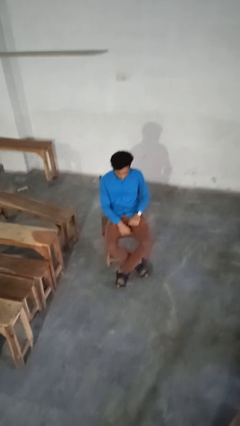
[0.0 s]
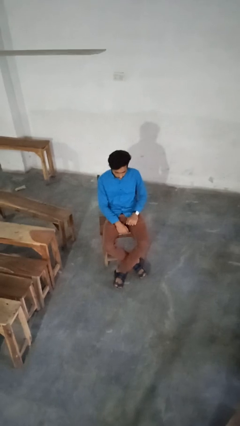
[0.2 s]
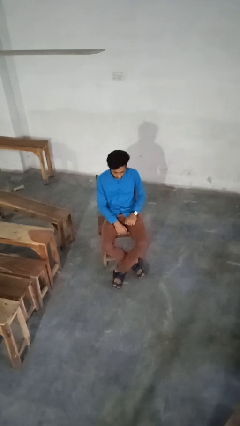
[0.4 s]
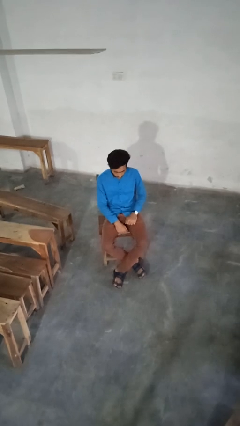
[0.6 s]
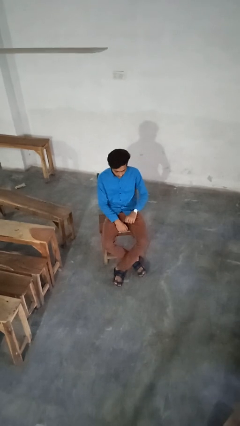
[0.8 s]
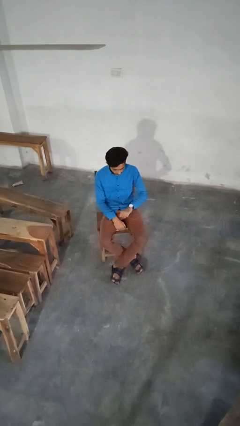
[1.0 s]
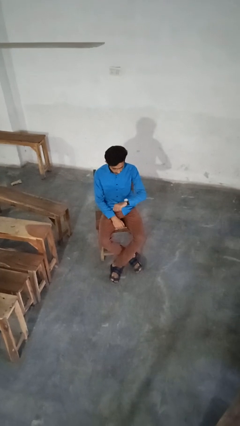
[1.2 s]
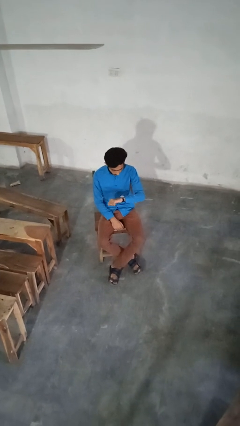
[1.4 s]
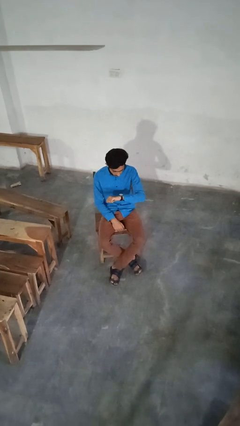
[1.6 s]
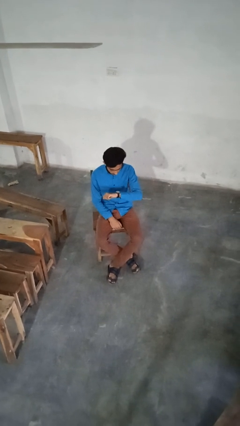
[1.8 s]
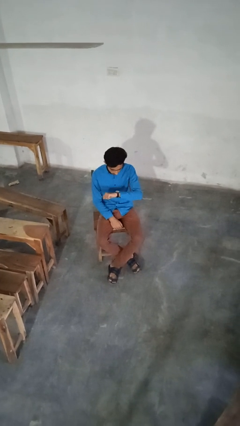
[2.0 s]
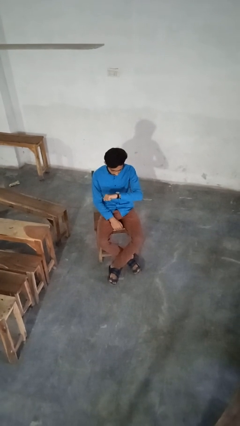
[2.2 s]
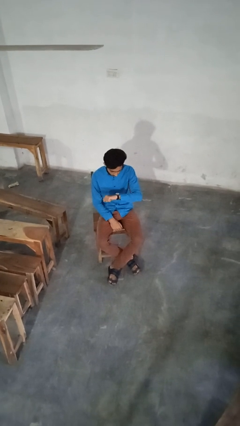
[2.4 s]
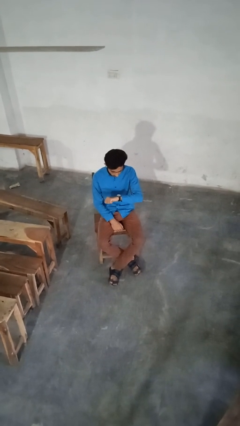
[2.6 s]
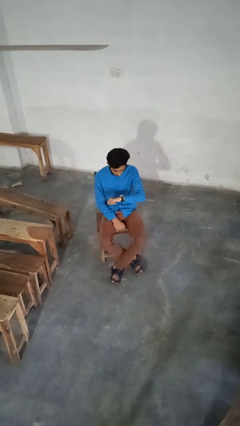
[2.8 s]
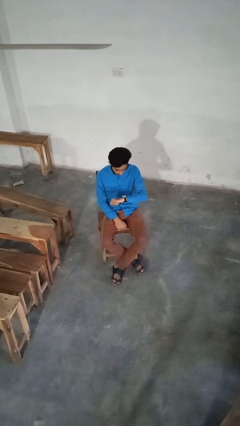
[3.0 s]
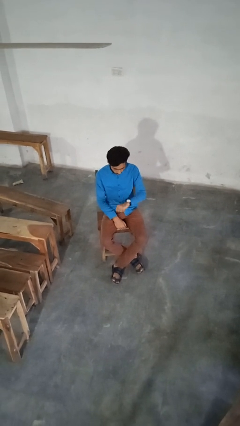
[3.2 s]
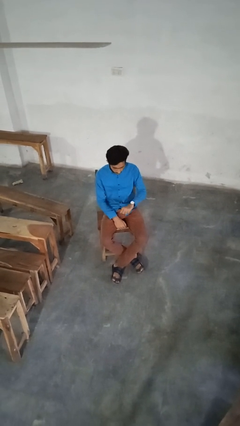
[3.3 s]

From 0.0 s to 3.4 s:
person looks at wristwatch

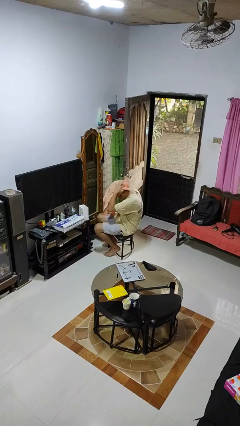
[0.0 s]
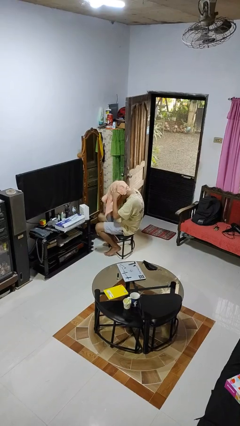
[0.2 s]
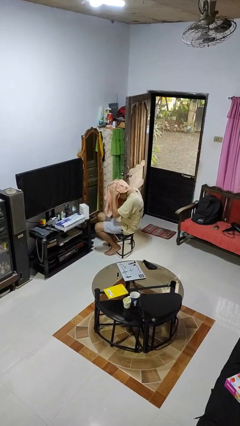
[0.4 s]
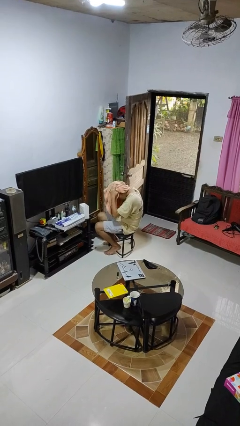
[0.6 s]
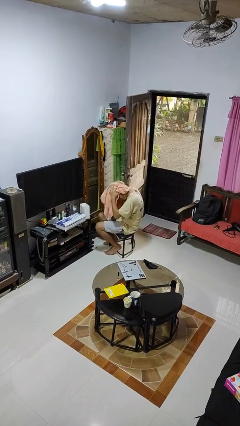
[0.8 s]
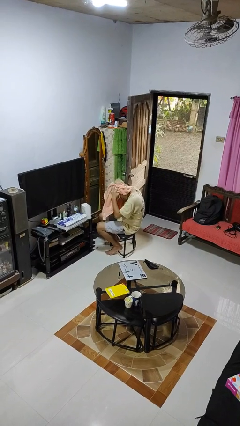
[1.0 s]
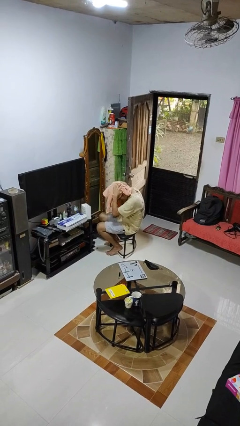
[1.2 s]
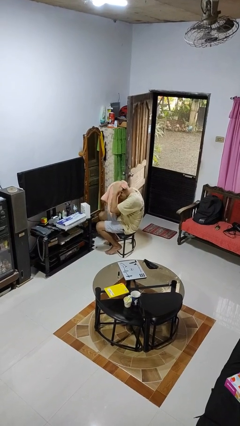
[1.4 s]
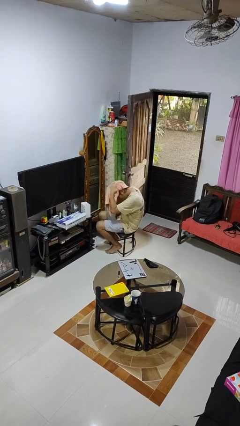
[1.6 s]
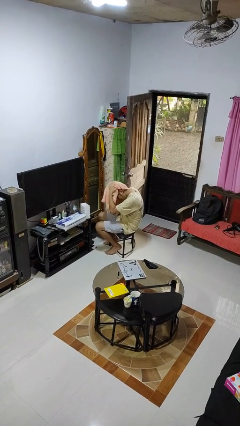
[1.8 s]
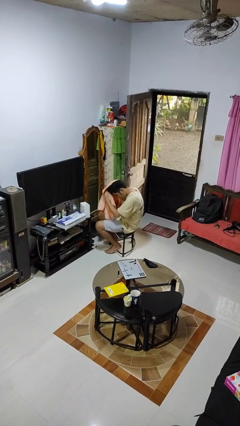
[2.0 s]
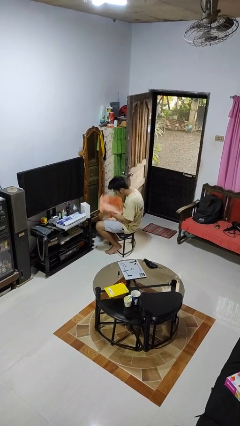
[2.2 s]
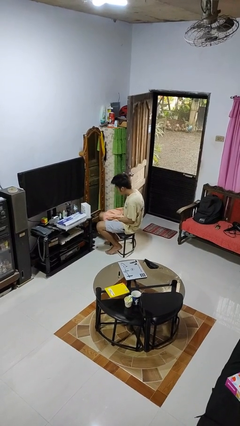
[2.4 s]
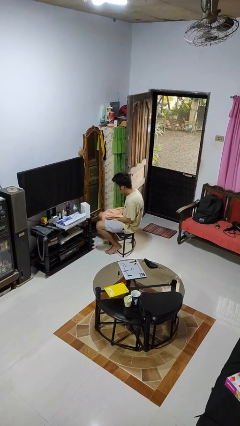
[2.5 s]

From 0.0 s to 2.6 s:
person dries hair with towel

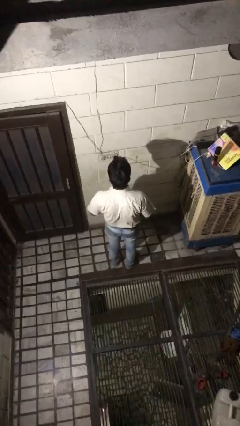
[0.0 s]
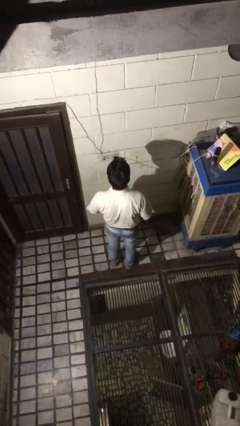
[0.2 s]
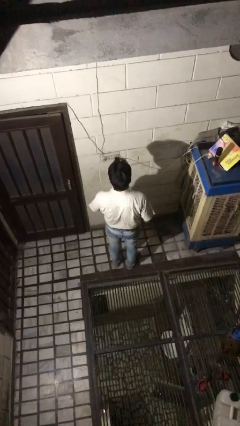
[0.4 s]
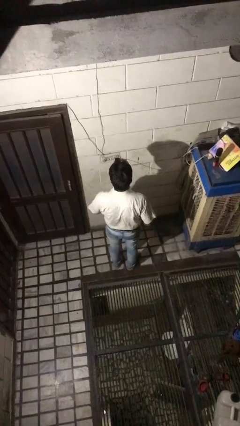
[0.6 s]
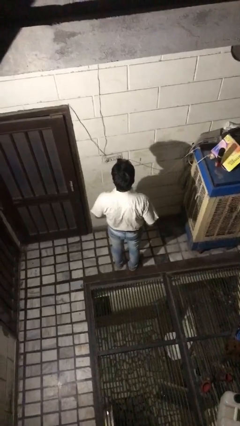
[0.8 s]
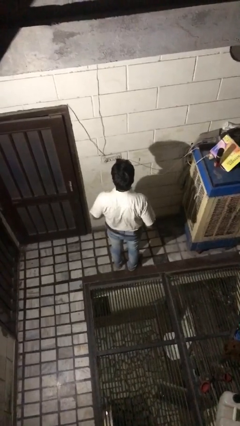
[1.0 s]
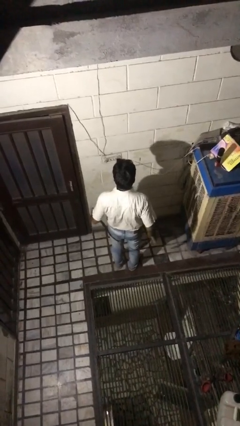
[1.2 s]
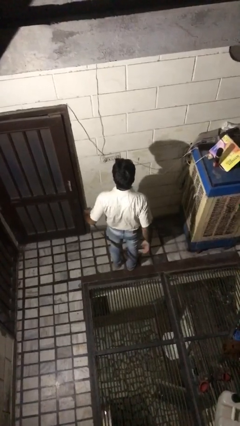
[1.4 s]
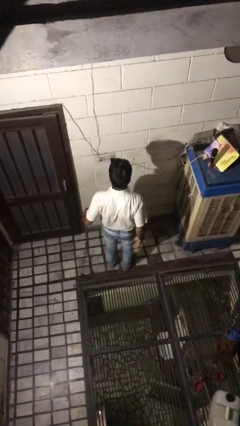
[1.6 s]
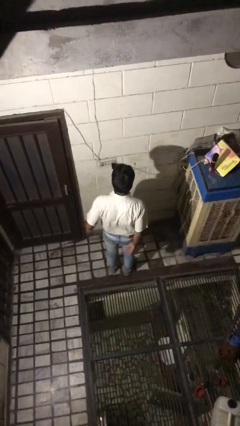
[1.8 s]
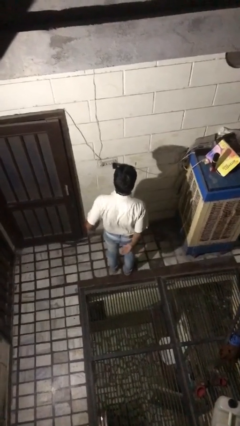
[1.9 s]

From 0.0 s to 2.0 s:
person takes off belt

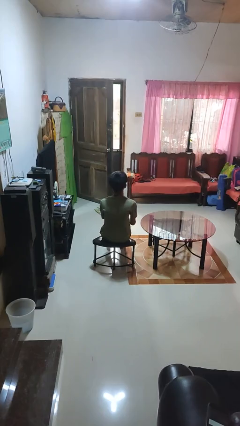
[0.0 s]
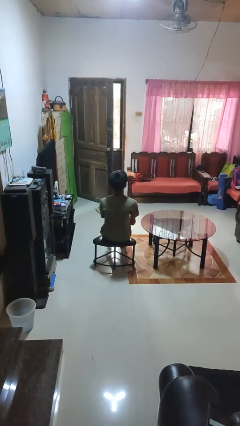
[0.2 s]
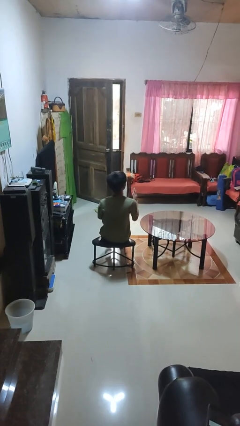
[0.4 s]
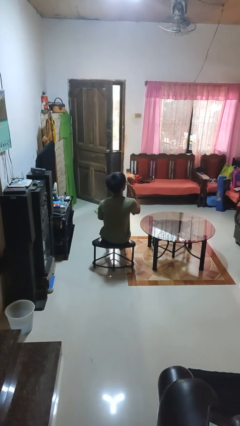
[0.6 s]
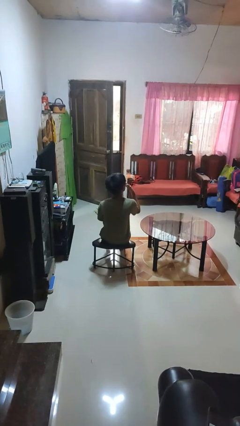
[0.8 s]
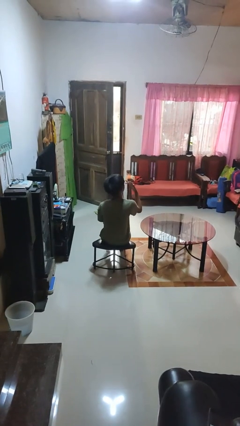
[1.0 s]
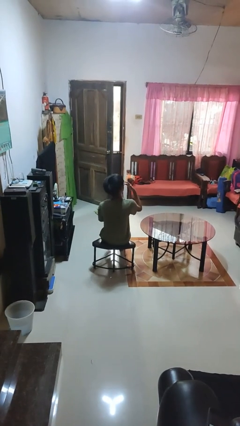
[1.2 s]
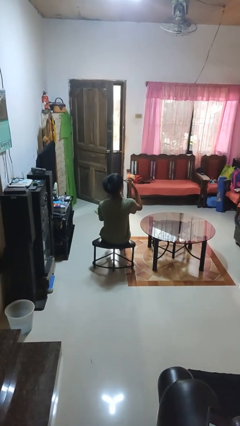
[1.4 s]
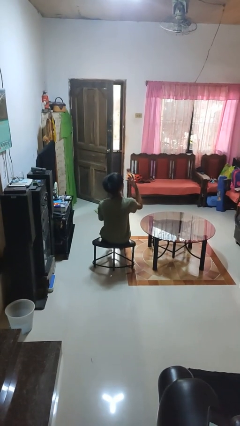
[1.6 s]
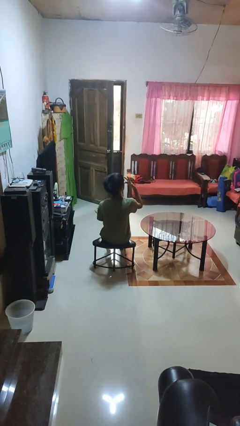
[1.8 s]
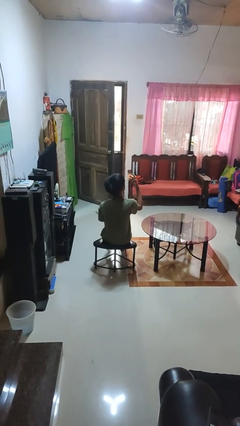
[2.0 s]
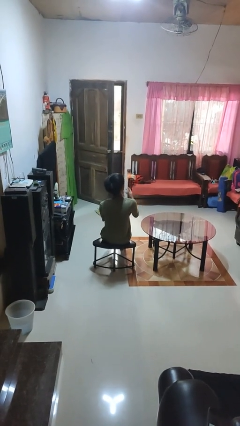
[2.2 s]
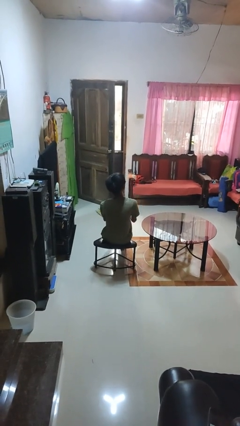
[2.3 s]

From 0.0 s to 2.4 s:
person licks fingers

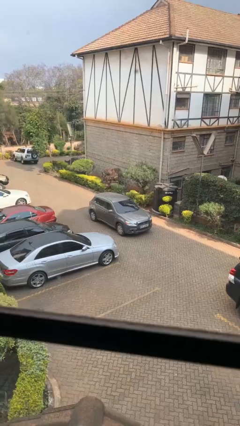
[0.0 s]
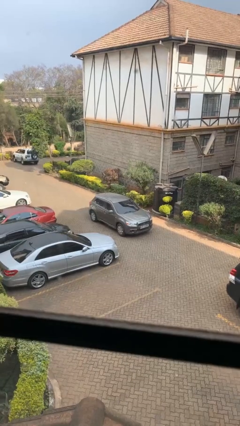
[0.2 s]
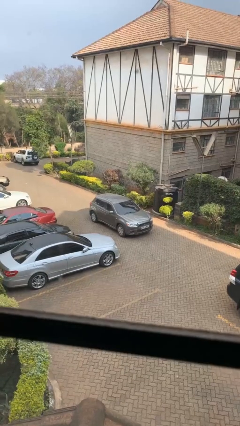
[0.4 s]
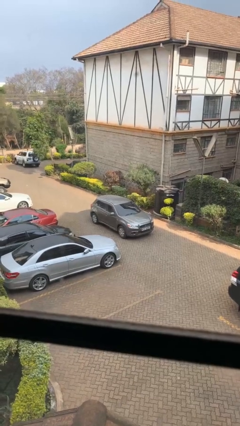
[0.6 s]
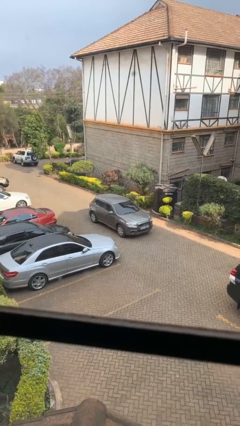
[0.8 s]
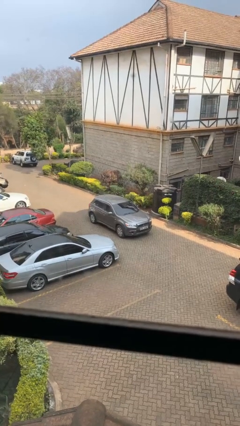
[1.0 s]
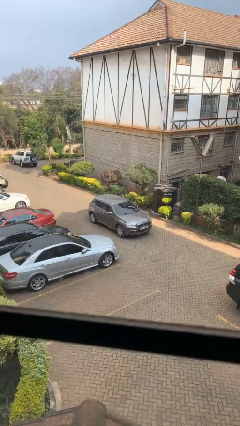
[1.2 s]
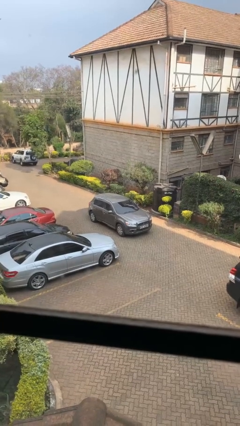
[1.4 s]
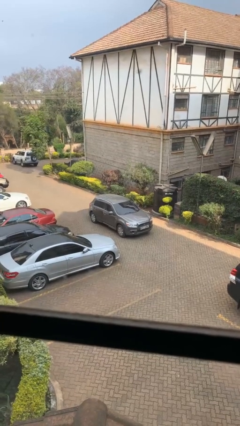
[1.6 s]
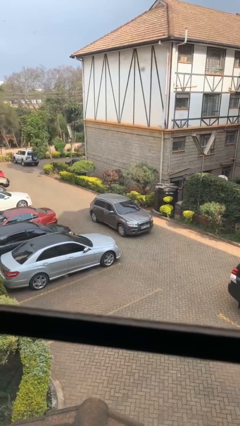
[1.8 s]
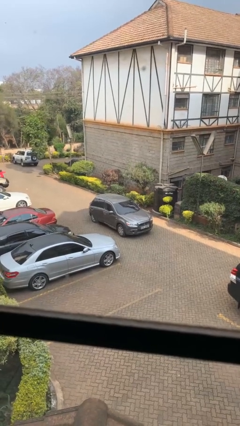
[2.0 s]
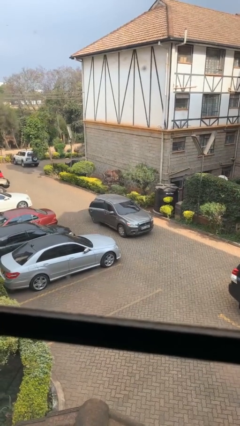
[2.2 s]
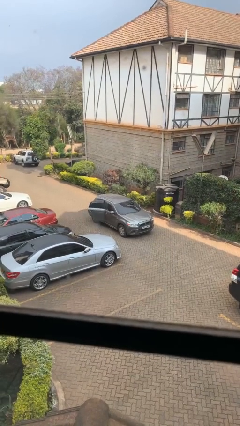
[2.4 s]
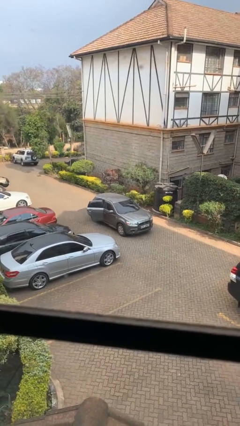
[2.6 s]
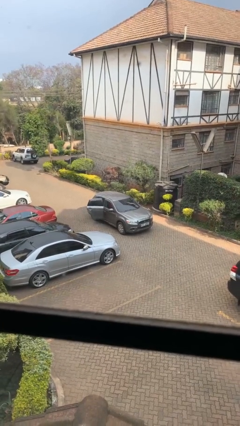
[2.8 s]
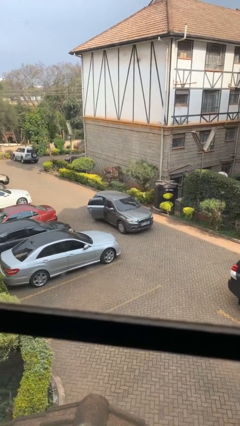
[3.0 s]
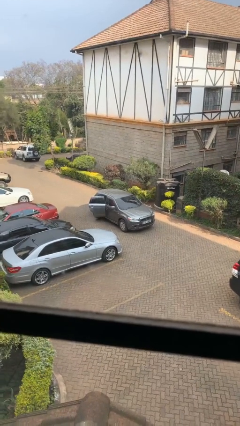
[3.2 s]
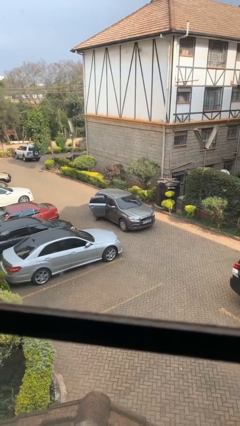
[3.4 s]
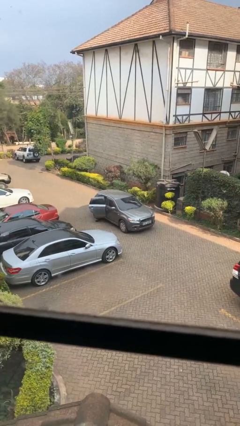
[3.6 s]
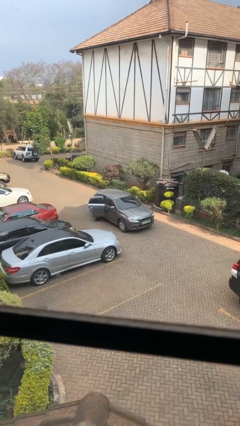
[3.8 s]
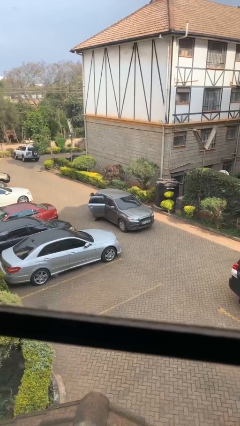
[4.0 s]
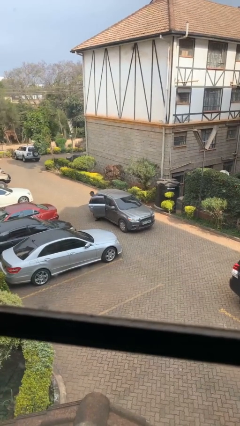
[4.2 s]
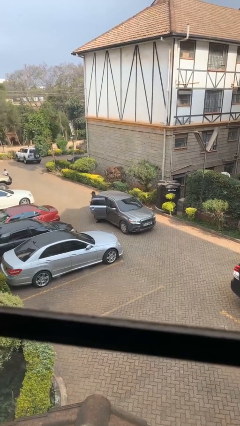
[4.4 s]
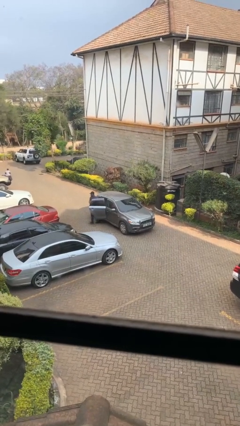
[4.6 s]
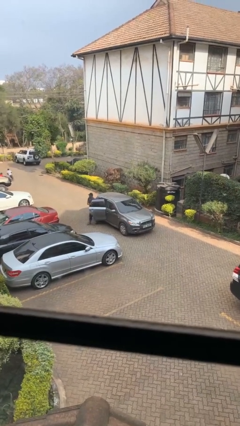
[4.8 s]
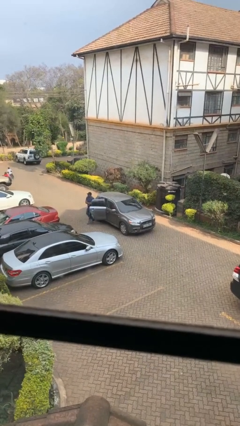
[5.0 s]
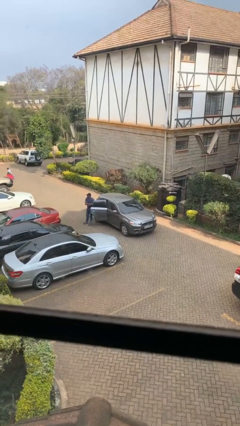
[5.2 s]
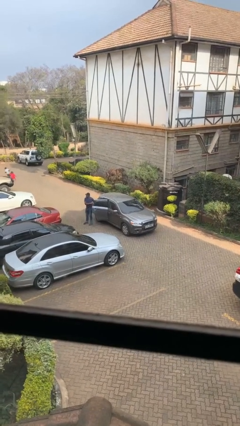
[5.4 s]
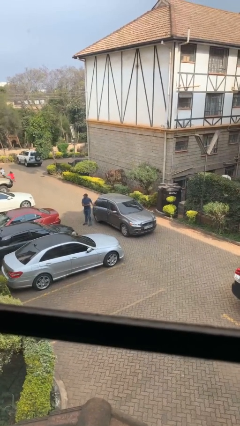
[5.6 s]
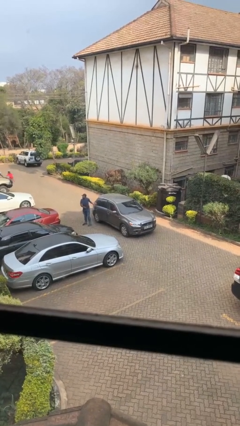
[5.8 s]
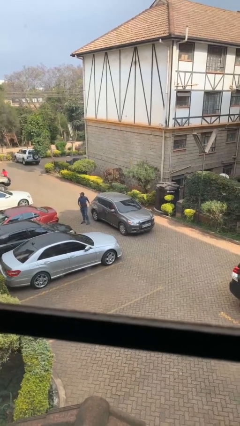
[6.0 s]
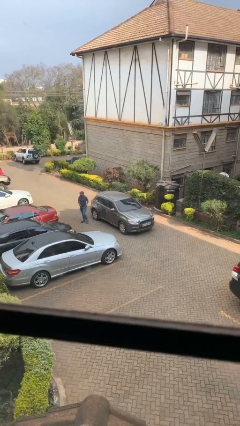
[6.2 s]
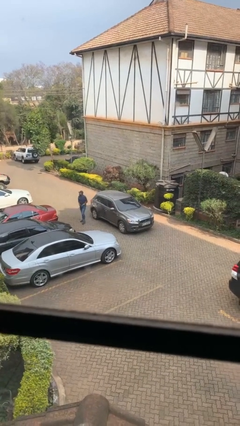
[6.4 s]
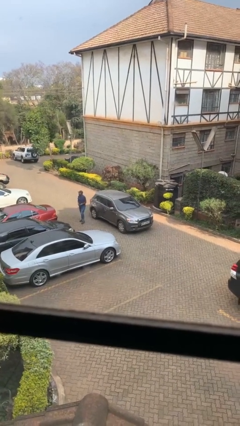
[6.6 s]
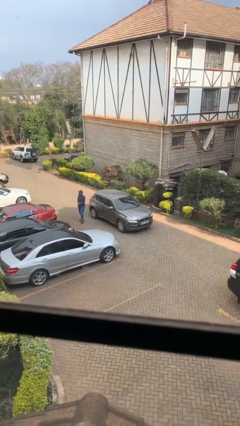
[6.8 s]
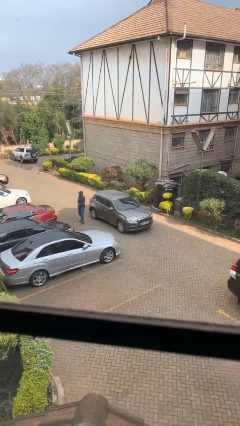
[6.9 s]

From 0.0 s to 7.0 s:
car drops off person

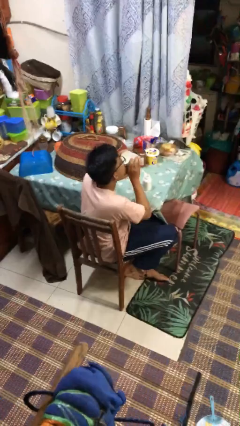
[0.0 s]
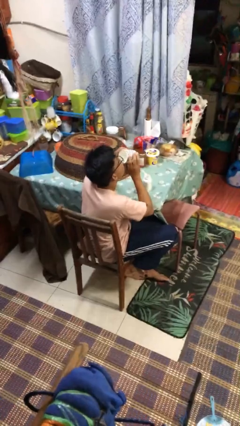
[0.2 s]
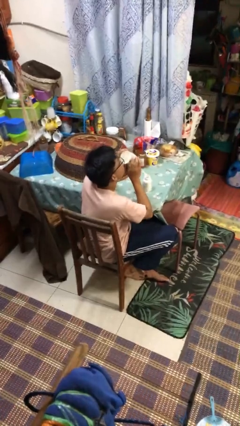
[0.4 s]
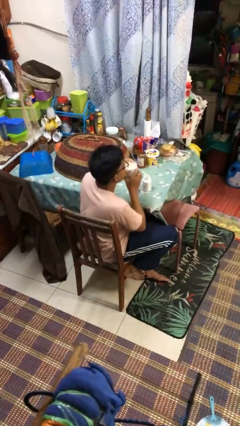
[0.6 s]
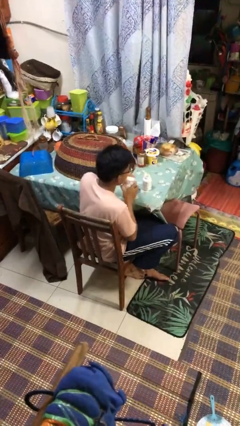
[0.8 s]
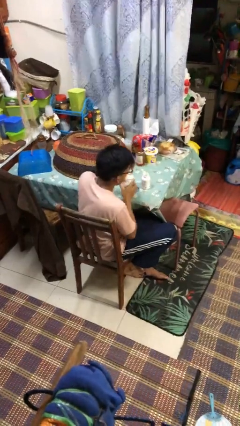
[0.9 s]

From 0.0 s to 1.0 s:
person drinks from cup
